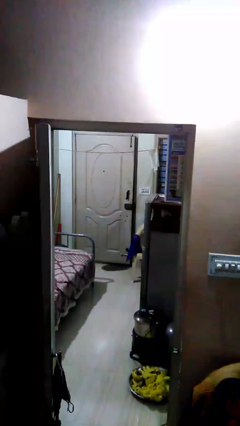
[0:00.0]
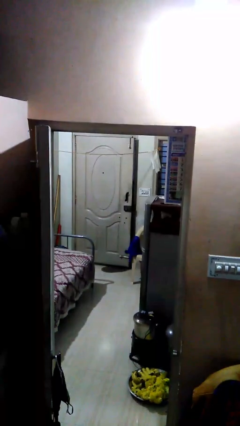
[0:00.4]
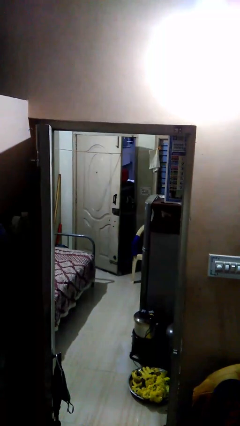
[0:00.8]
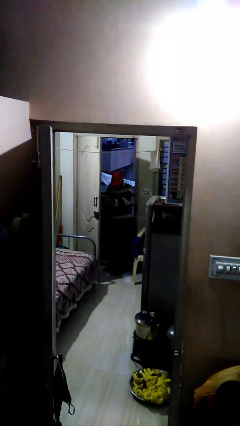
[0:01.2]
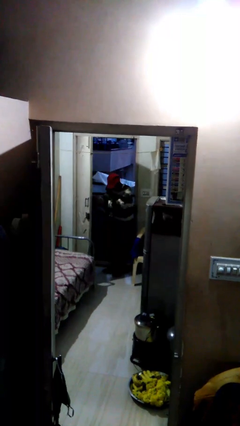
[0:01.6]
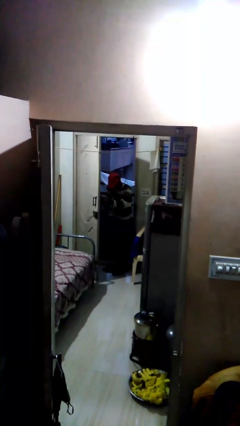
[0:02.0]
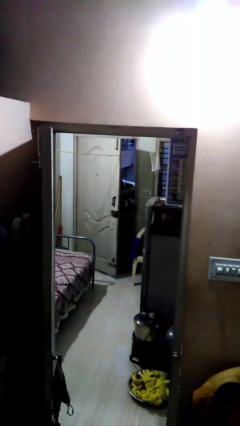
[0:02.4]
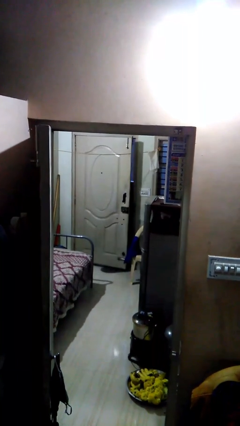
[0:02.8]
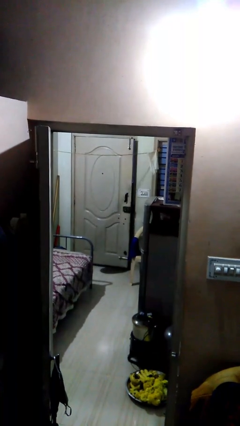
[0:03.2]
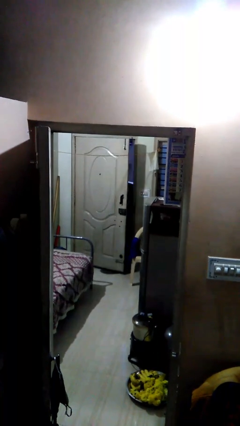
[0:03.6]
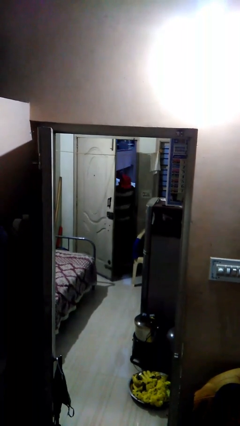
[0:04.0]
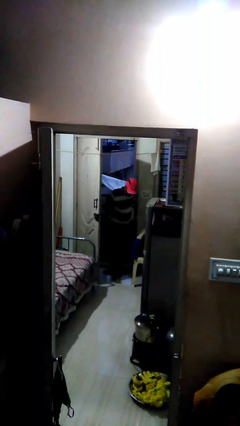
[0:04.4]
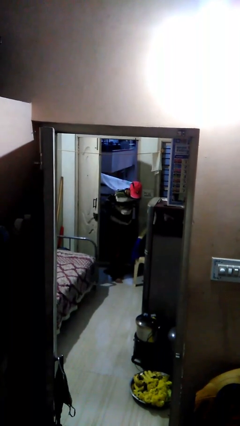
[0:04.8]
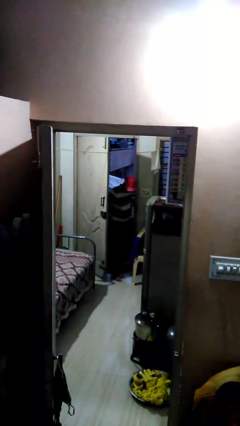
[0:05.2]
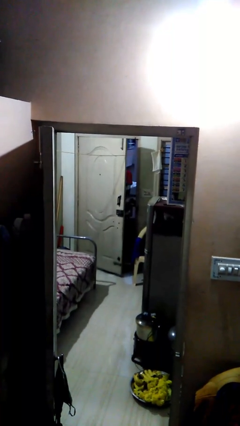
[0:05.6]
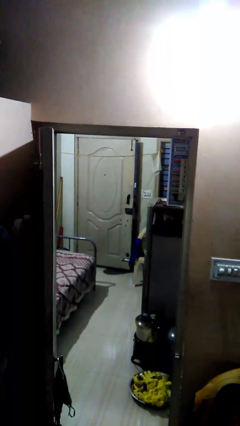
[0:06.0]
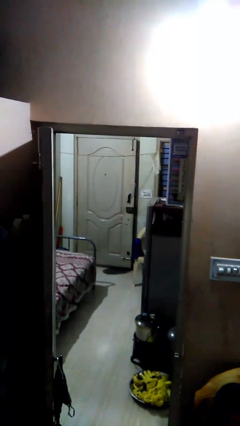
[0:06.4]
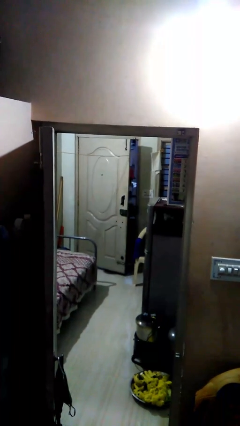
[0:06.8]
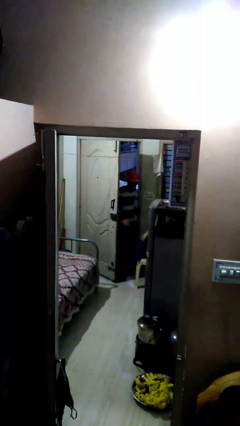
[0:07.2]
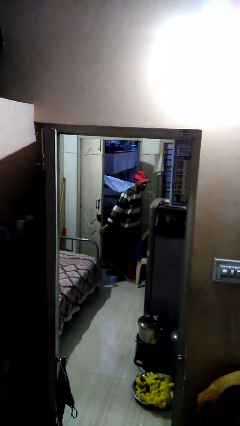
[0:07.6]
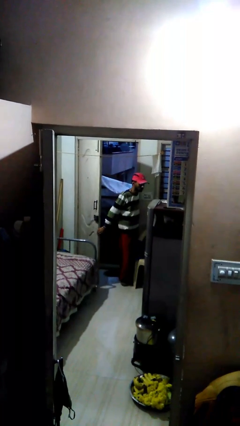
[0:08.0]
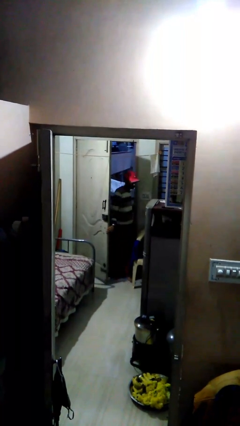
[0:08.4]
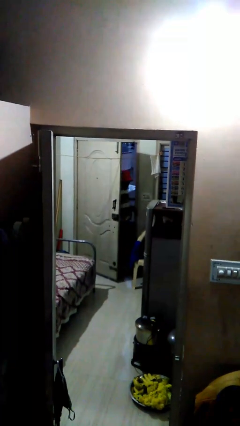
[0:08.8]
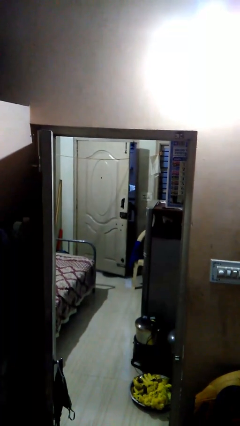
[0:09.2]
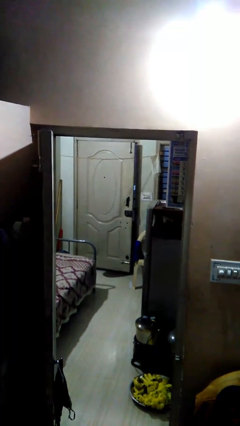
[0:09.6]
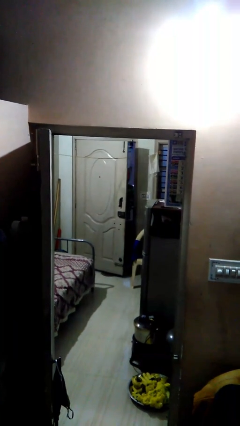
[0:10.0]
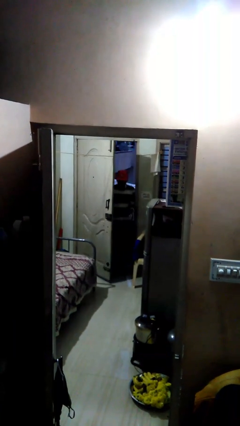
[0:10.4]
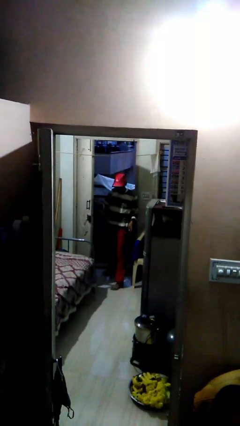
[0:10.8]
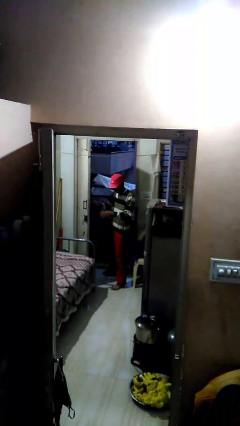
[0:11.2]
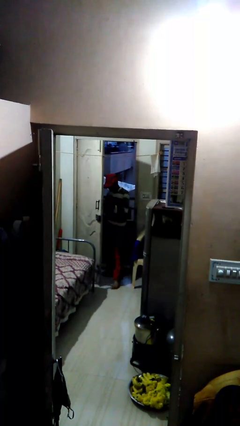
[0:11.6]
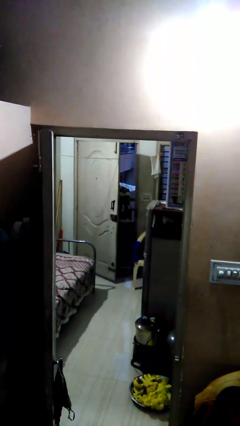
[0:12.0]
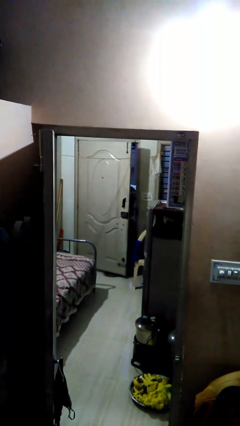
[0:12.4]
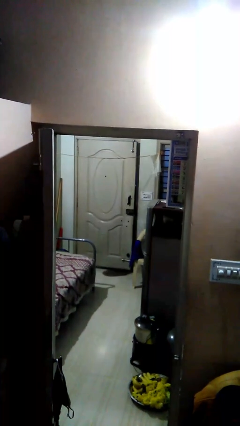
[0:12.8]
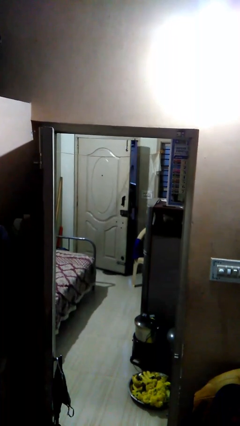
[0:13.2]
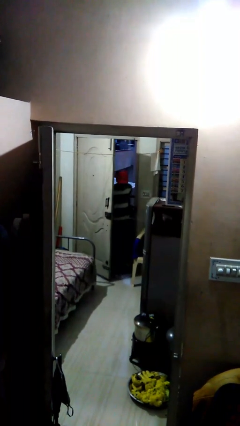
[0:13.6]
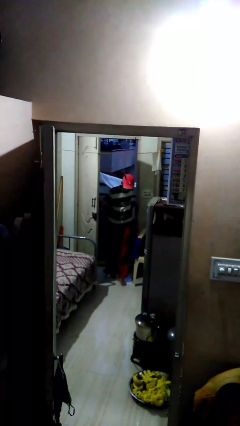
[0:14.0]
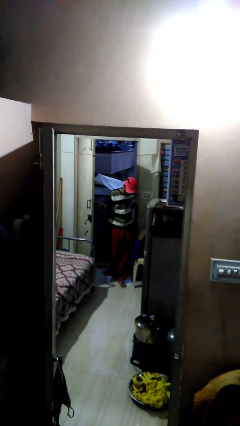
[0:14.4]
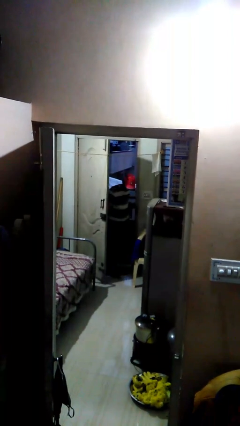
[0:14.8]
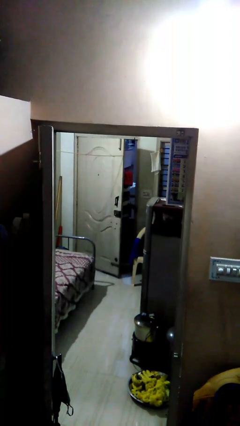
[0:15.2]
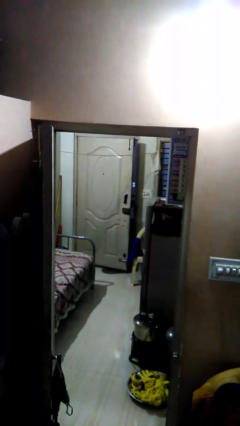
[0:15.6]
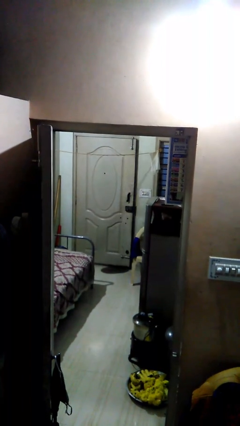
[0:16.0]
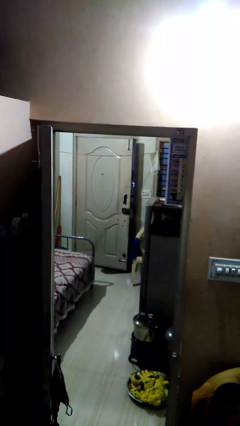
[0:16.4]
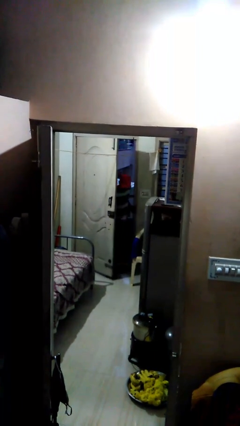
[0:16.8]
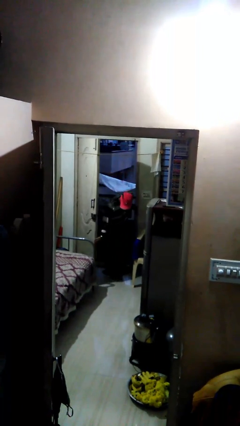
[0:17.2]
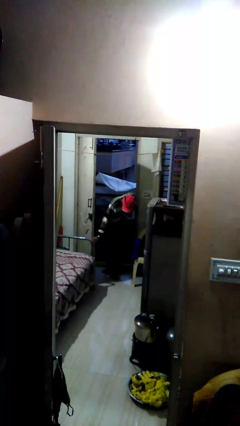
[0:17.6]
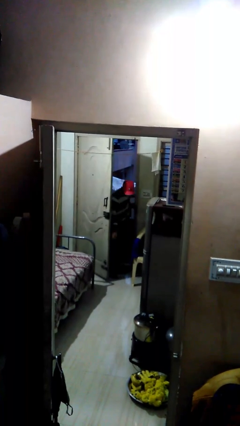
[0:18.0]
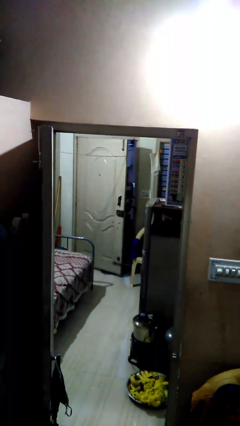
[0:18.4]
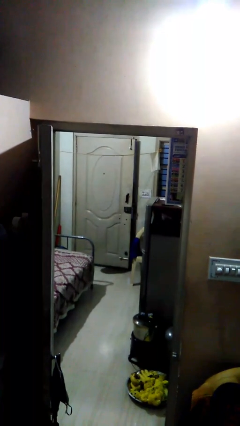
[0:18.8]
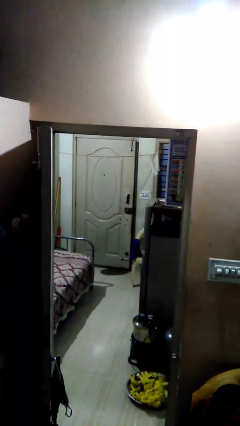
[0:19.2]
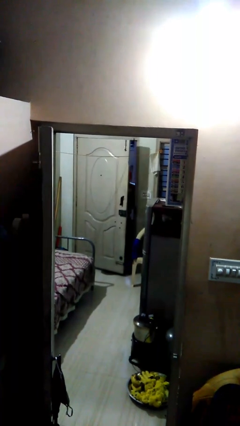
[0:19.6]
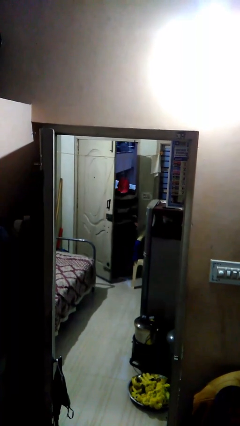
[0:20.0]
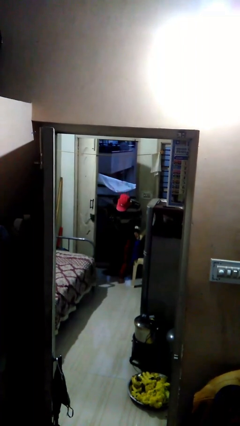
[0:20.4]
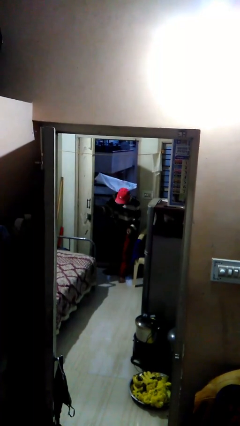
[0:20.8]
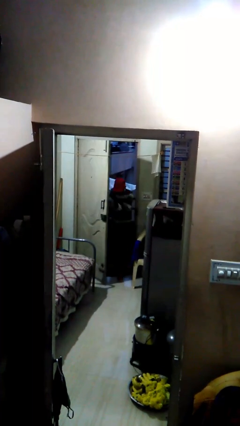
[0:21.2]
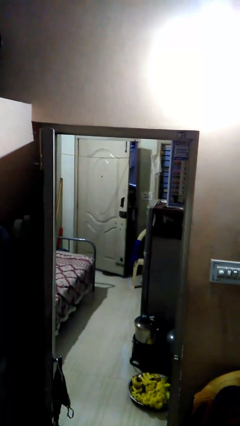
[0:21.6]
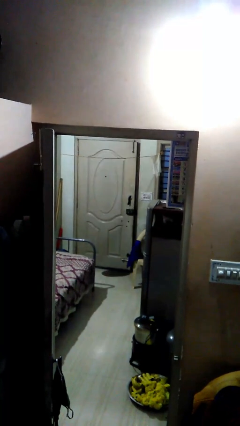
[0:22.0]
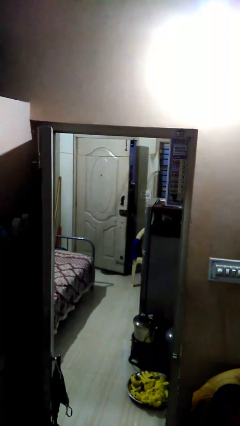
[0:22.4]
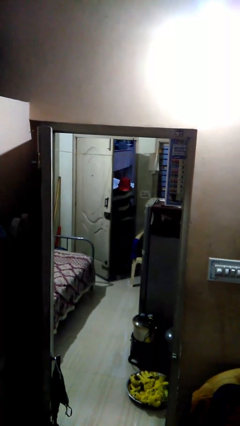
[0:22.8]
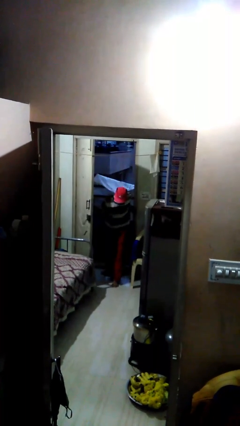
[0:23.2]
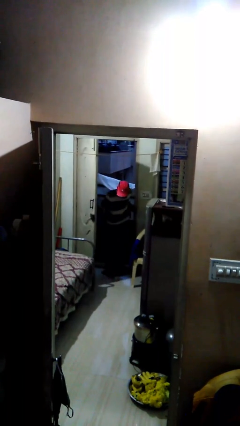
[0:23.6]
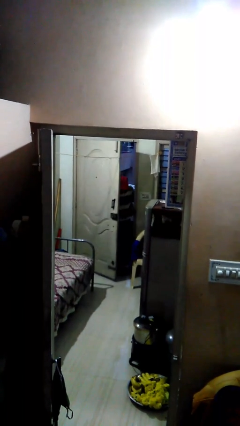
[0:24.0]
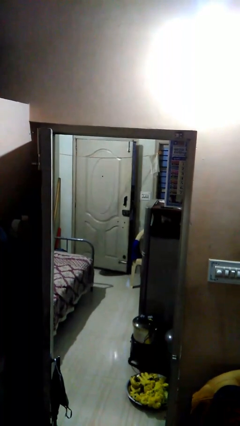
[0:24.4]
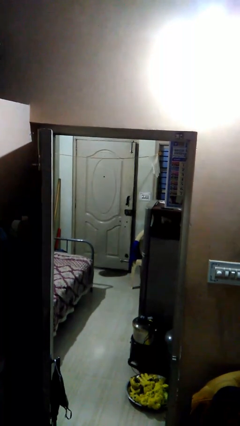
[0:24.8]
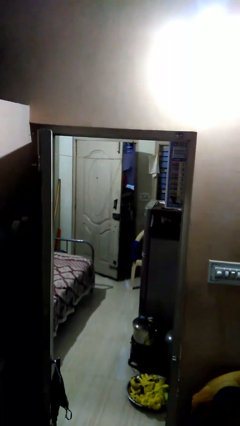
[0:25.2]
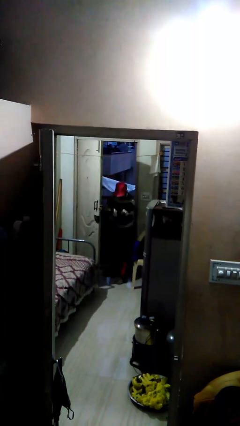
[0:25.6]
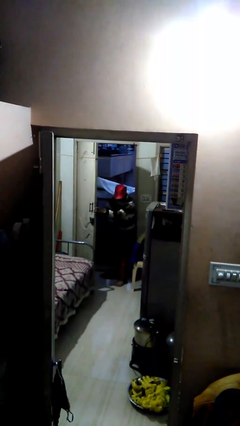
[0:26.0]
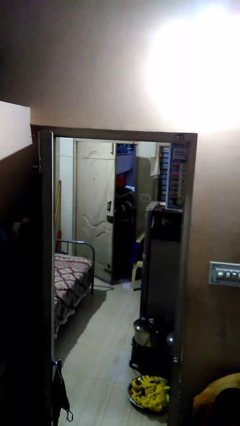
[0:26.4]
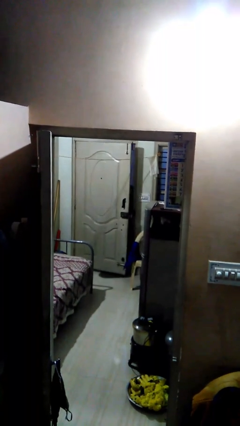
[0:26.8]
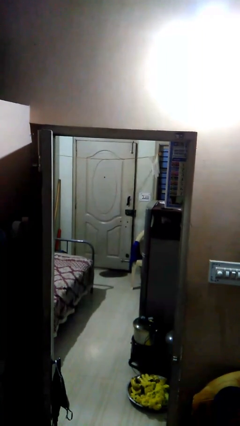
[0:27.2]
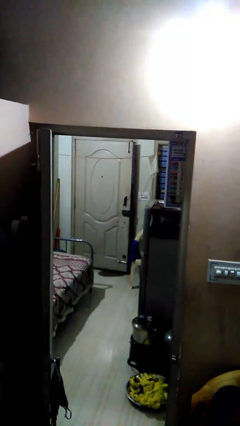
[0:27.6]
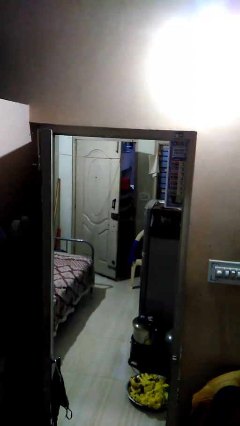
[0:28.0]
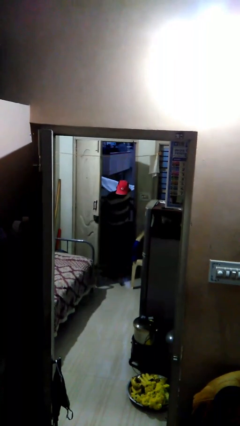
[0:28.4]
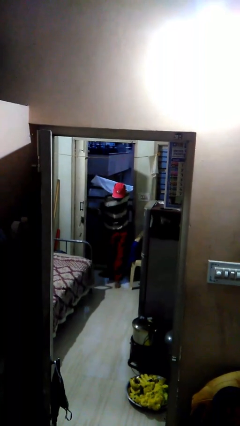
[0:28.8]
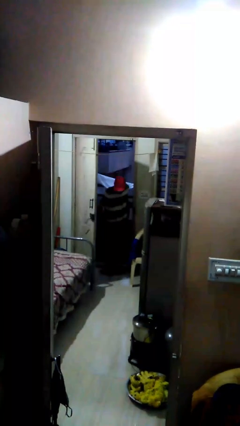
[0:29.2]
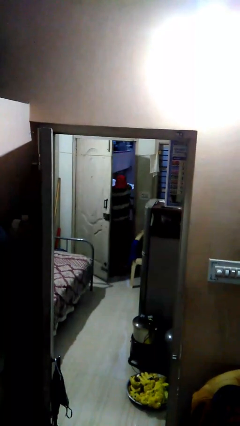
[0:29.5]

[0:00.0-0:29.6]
person closes facility door

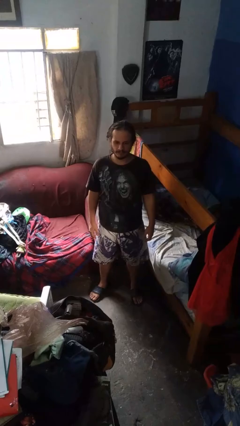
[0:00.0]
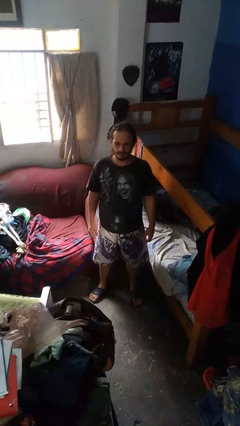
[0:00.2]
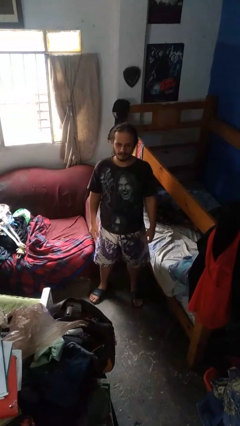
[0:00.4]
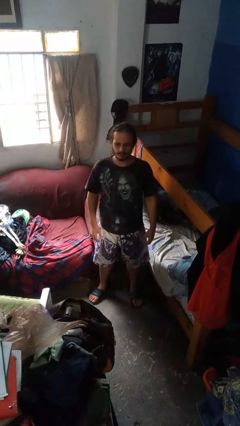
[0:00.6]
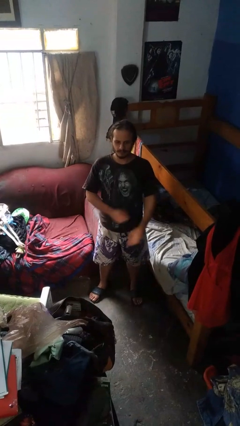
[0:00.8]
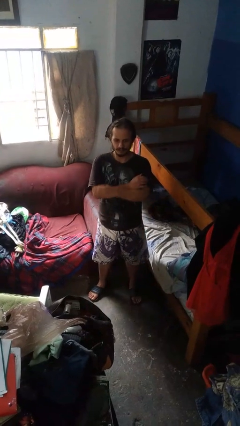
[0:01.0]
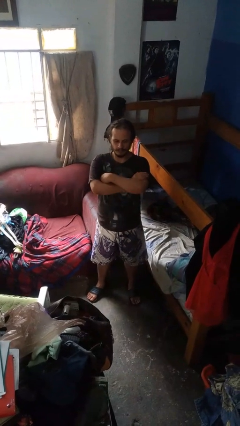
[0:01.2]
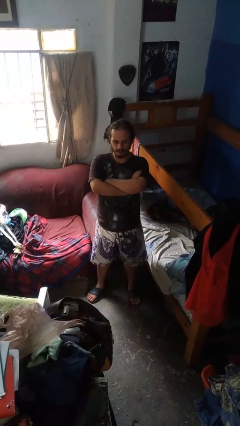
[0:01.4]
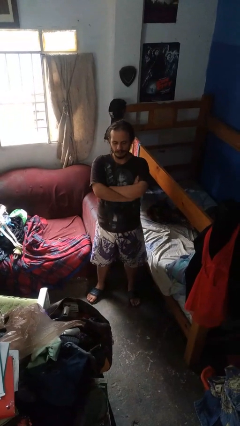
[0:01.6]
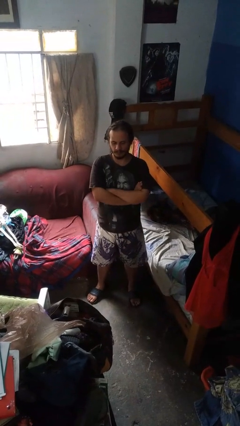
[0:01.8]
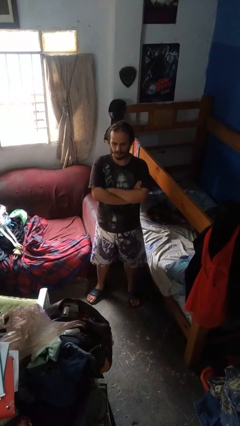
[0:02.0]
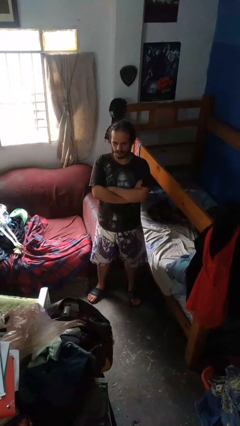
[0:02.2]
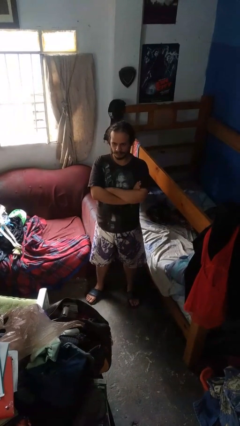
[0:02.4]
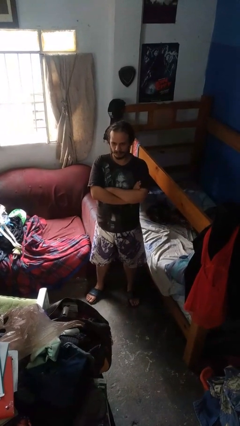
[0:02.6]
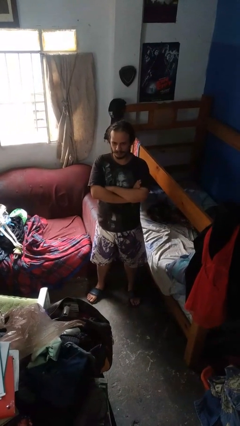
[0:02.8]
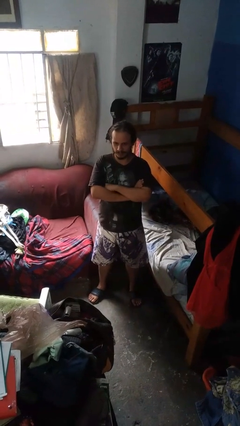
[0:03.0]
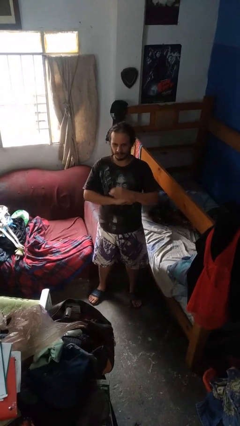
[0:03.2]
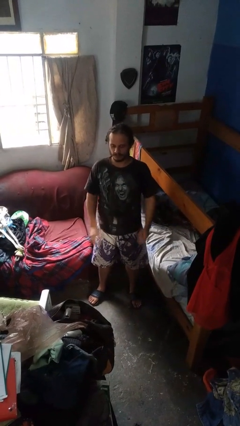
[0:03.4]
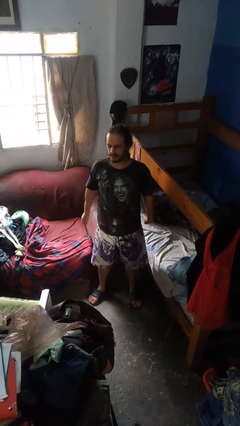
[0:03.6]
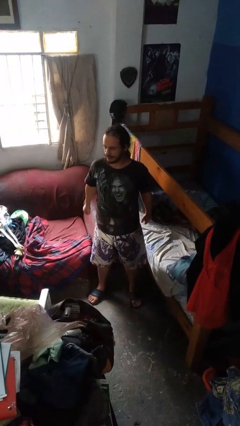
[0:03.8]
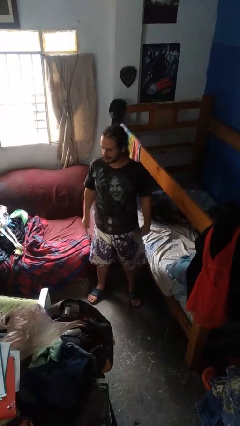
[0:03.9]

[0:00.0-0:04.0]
person gestures arms x
